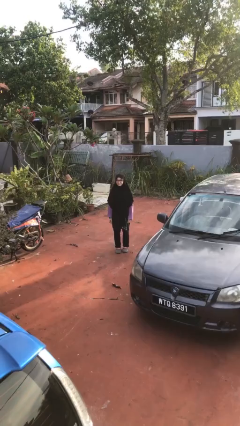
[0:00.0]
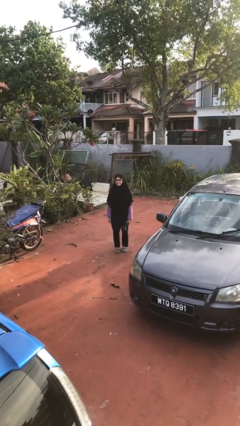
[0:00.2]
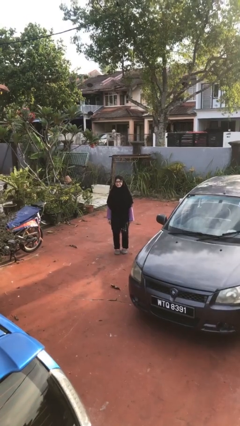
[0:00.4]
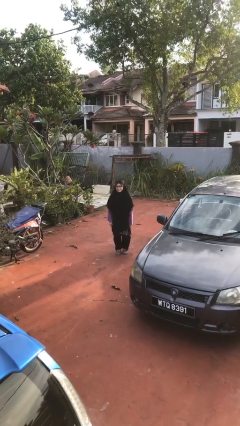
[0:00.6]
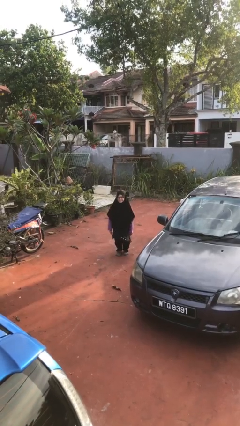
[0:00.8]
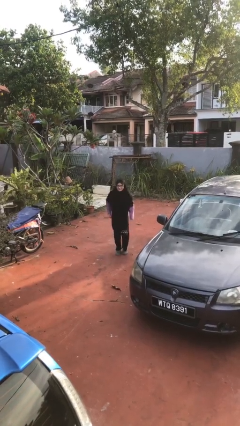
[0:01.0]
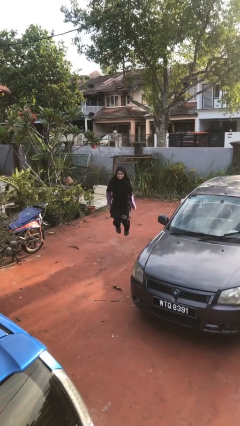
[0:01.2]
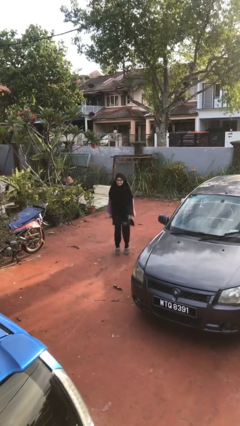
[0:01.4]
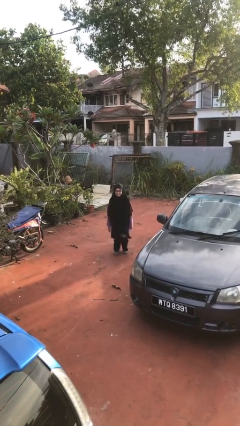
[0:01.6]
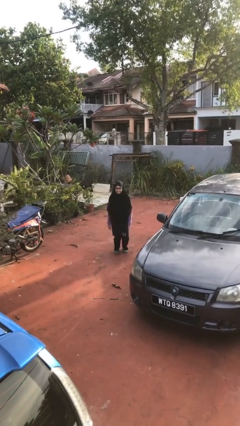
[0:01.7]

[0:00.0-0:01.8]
person jumps

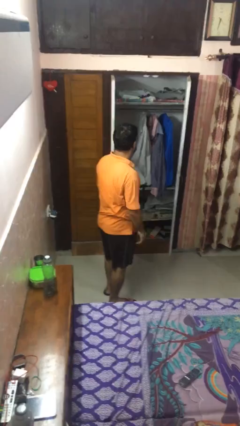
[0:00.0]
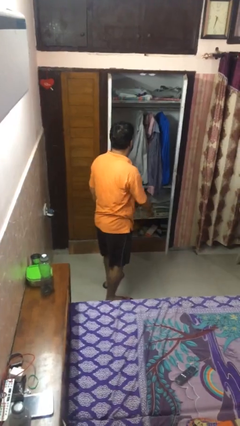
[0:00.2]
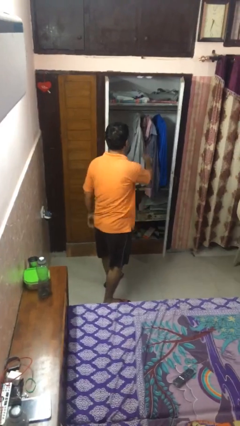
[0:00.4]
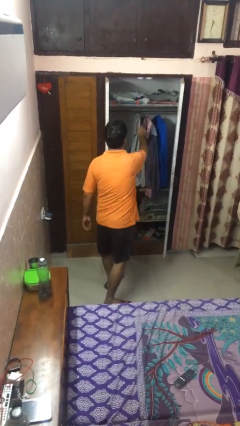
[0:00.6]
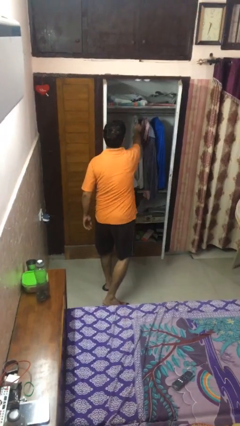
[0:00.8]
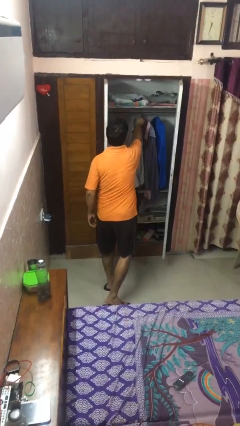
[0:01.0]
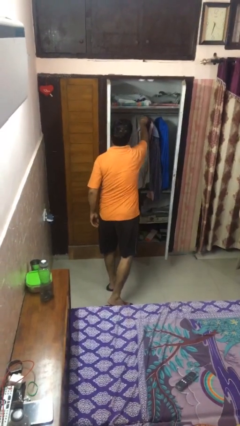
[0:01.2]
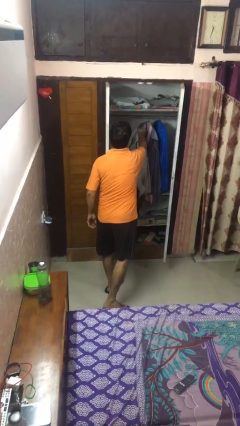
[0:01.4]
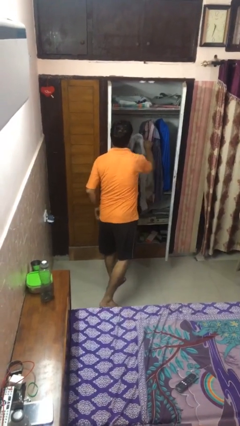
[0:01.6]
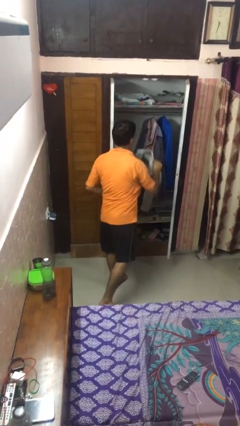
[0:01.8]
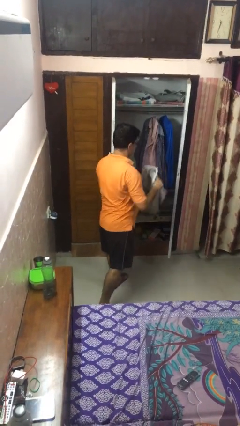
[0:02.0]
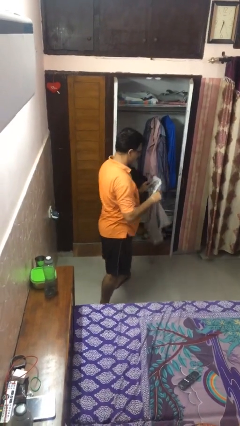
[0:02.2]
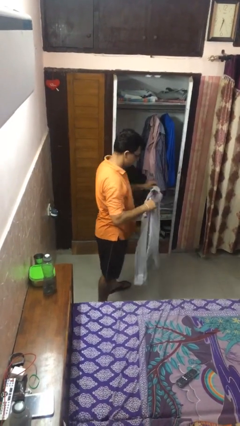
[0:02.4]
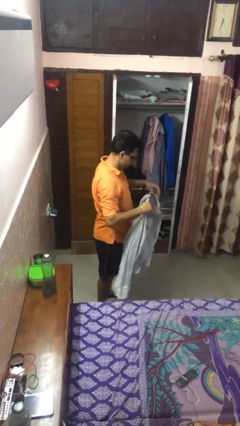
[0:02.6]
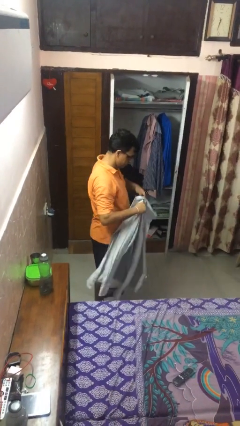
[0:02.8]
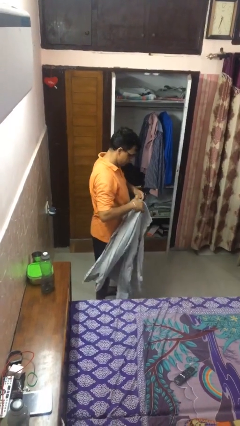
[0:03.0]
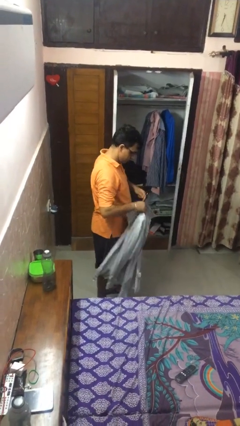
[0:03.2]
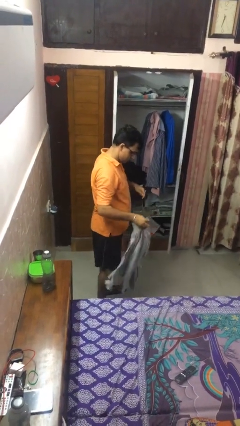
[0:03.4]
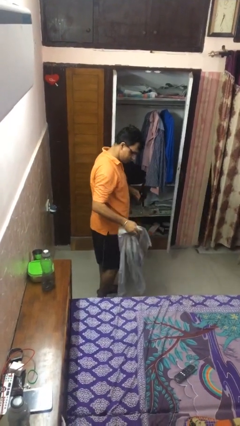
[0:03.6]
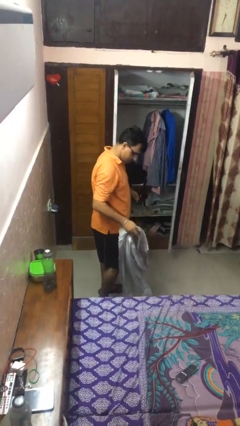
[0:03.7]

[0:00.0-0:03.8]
person takes clothes from closet

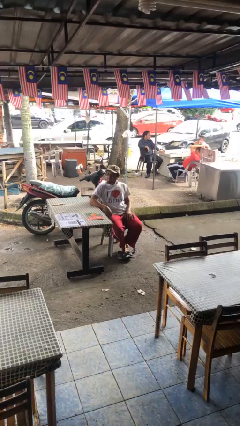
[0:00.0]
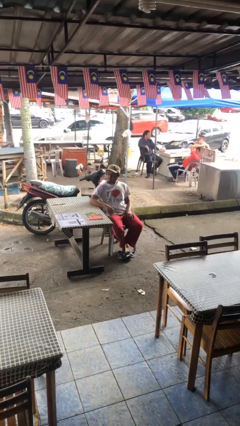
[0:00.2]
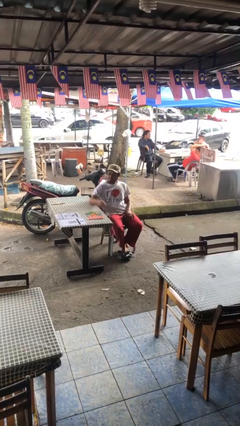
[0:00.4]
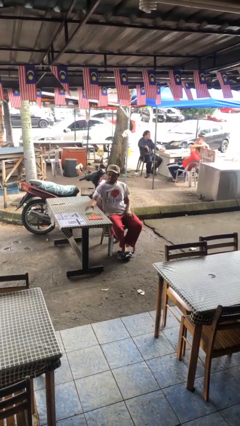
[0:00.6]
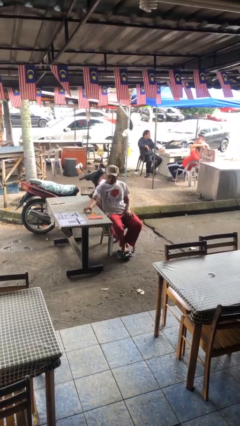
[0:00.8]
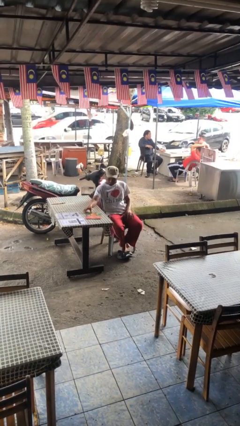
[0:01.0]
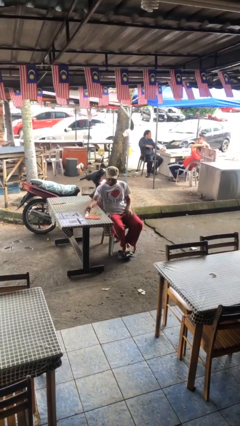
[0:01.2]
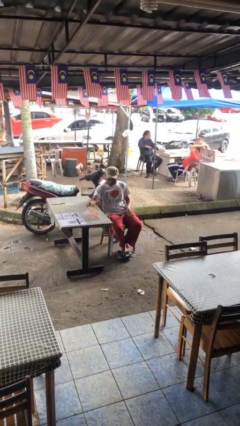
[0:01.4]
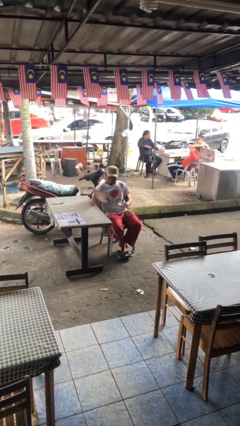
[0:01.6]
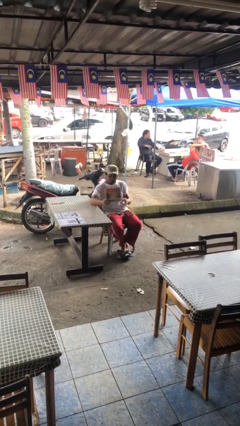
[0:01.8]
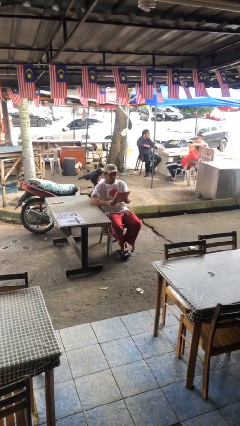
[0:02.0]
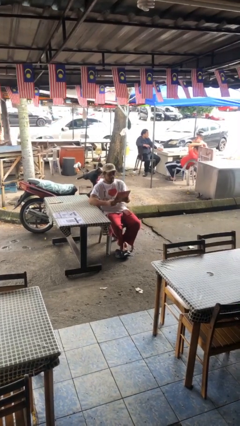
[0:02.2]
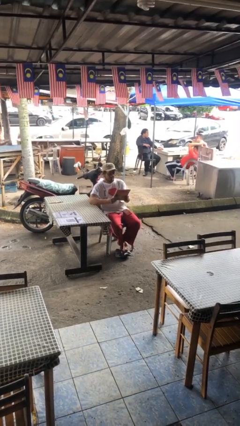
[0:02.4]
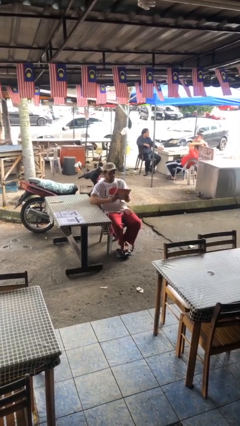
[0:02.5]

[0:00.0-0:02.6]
person picks up object from table

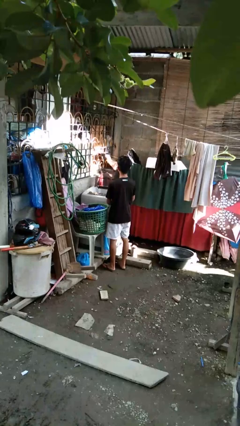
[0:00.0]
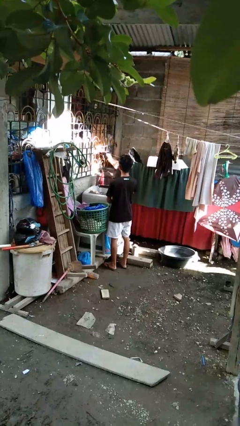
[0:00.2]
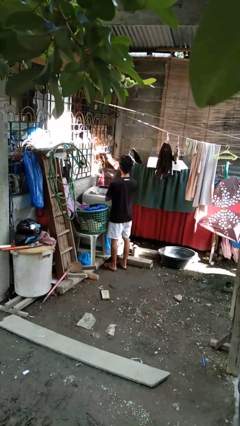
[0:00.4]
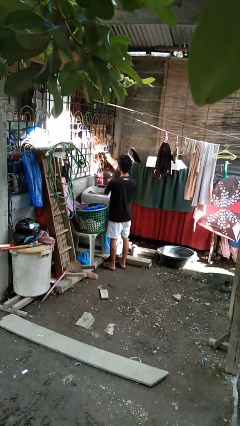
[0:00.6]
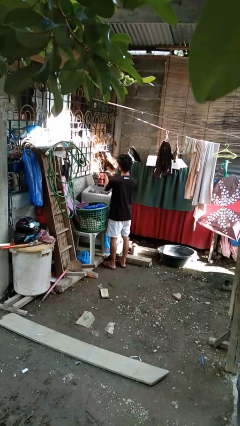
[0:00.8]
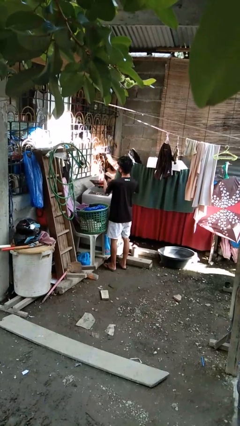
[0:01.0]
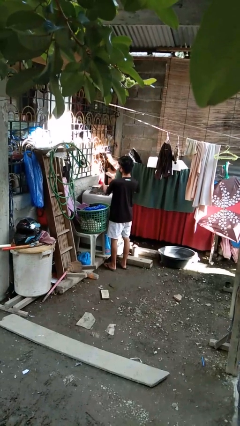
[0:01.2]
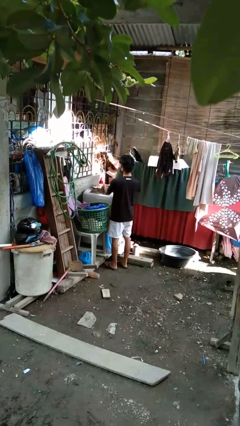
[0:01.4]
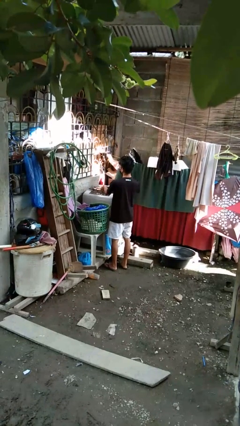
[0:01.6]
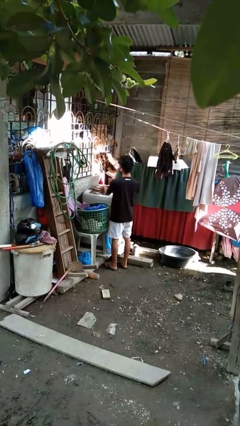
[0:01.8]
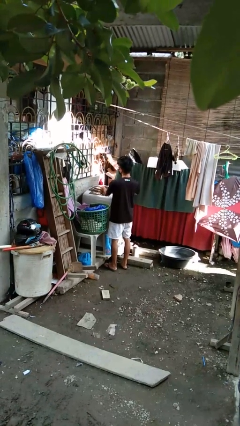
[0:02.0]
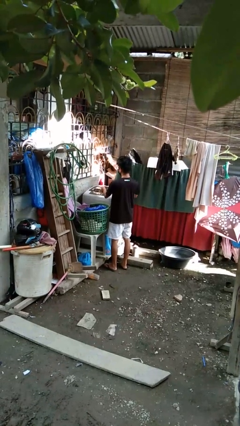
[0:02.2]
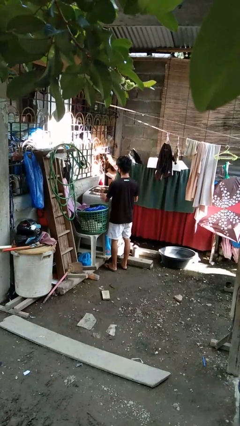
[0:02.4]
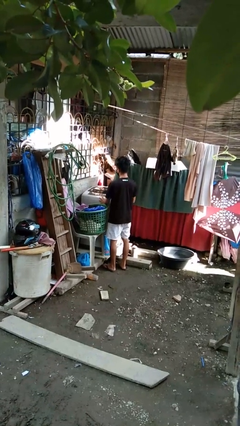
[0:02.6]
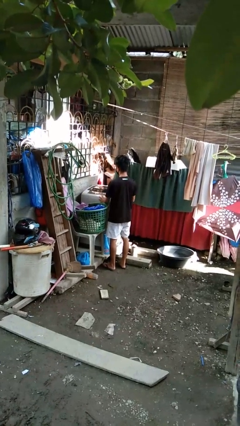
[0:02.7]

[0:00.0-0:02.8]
person closes clothes washer

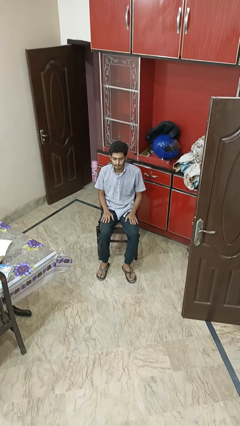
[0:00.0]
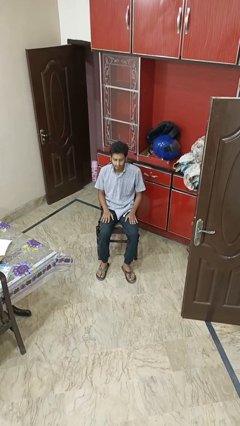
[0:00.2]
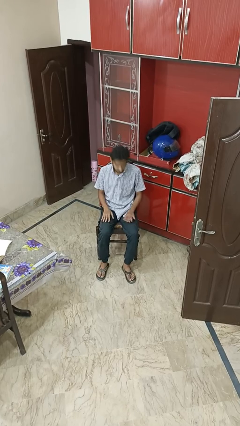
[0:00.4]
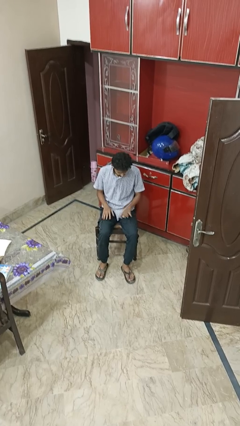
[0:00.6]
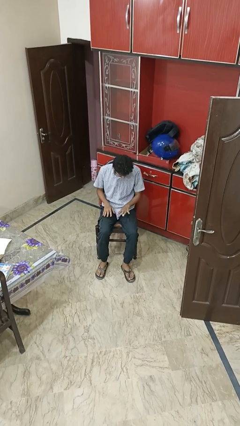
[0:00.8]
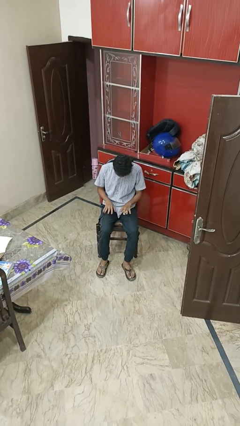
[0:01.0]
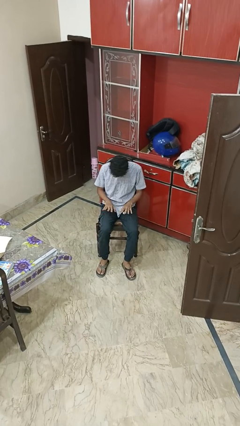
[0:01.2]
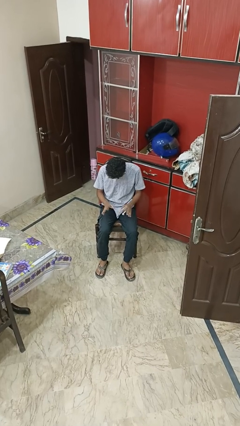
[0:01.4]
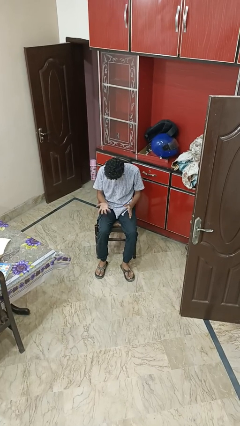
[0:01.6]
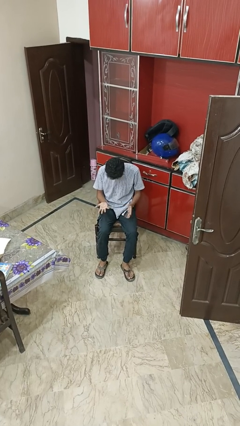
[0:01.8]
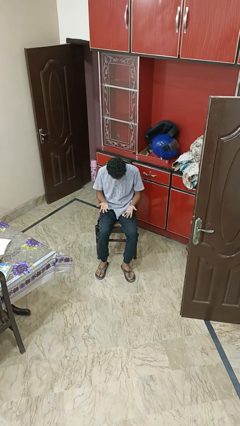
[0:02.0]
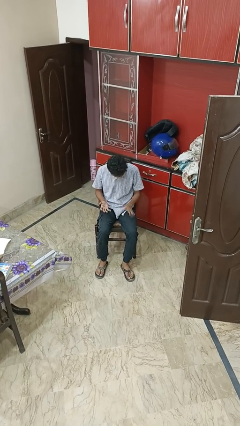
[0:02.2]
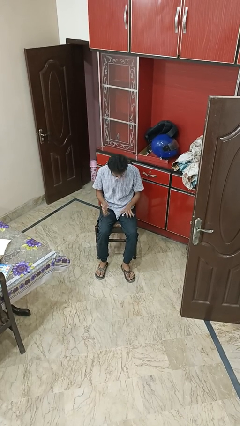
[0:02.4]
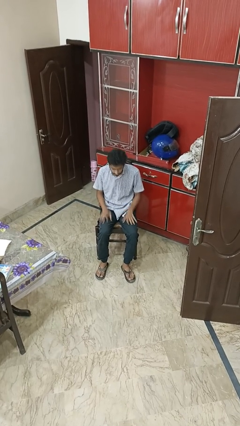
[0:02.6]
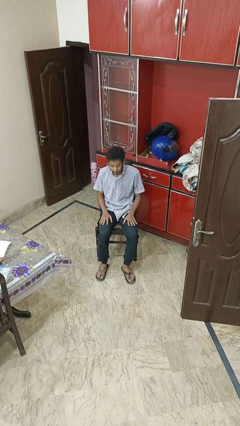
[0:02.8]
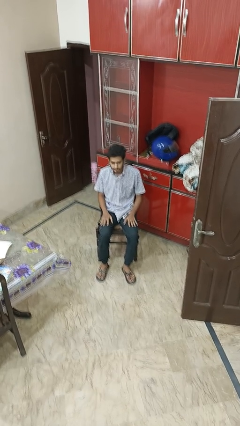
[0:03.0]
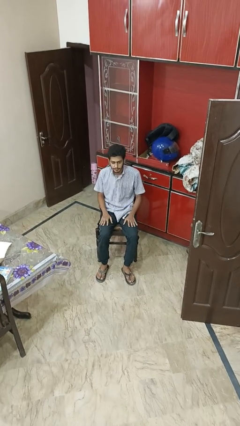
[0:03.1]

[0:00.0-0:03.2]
person looks at hands in lap

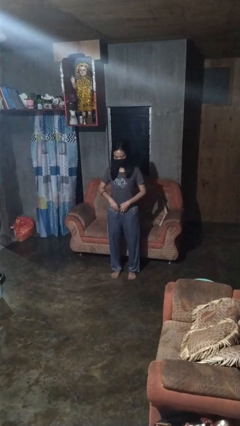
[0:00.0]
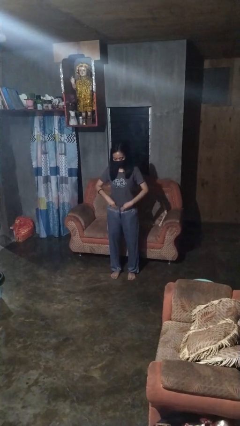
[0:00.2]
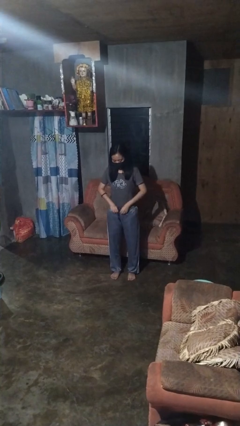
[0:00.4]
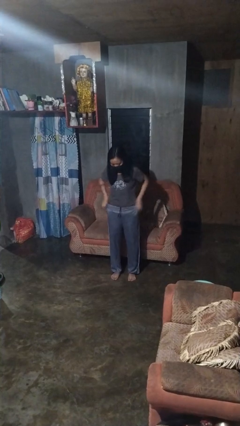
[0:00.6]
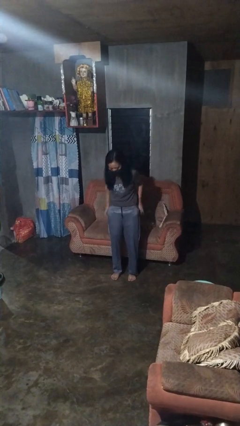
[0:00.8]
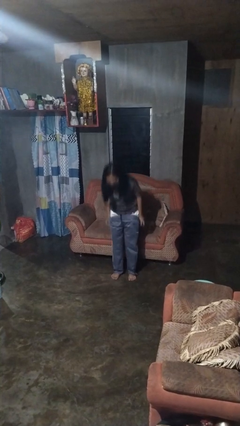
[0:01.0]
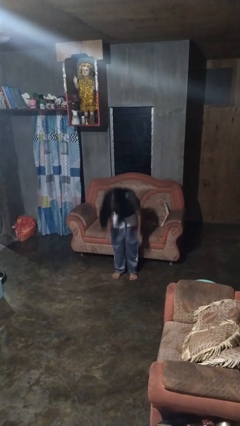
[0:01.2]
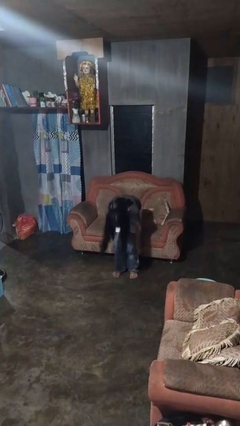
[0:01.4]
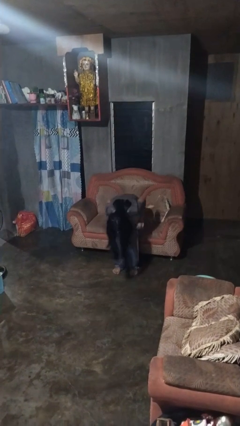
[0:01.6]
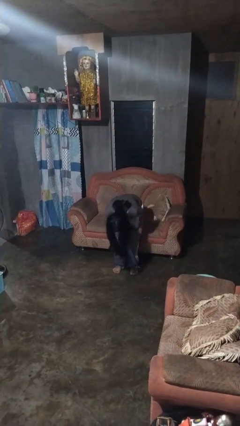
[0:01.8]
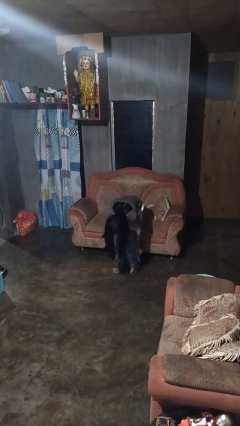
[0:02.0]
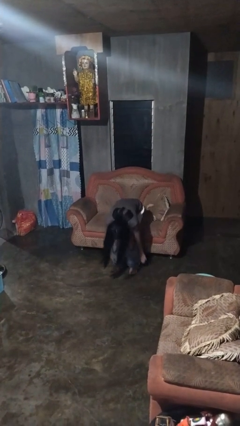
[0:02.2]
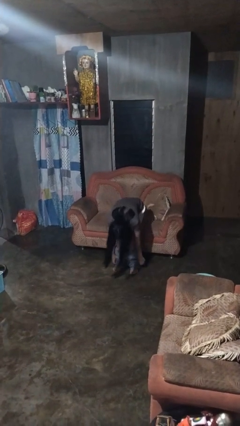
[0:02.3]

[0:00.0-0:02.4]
person takes off pants

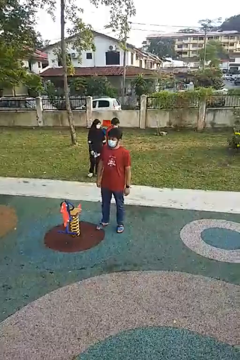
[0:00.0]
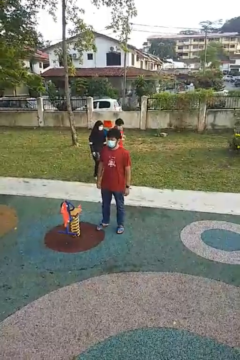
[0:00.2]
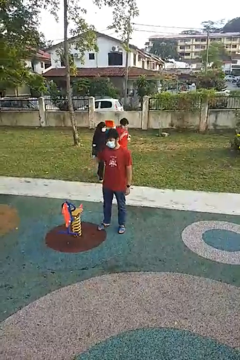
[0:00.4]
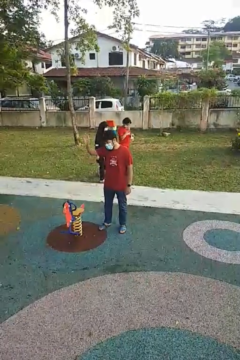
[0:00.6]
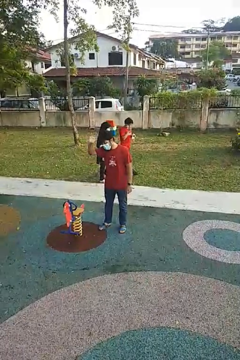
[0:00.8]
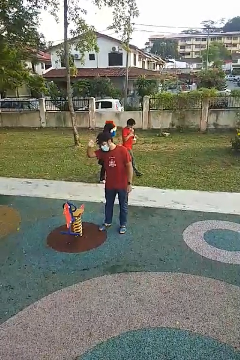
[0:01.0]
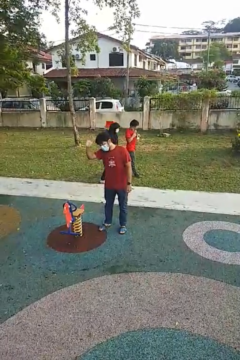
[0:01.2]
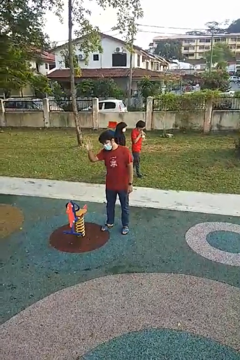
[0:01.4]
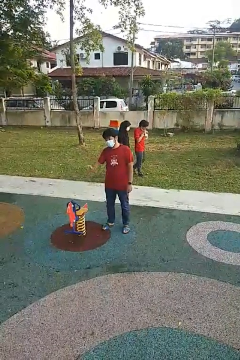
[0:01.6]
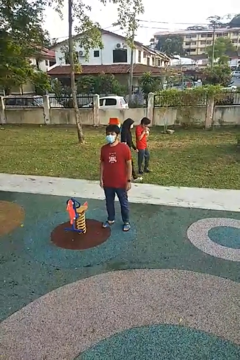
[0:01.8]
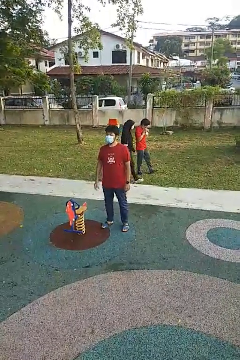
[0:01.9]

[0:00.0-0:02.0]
person waves at person
